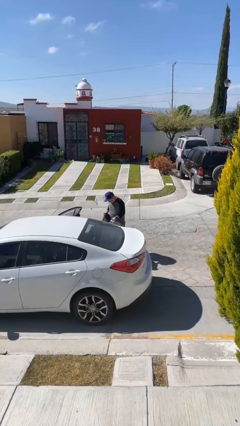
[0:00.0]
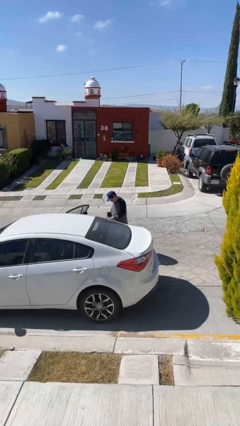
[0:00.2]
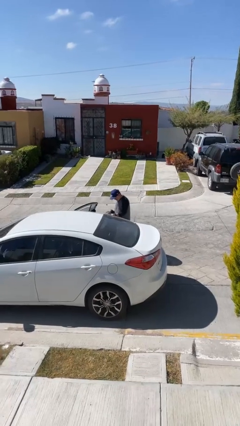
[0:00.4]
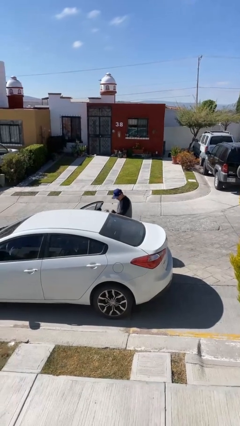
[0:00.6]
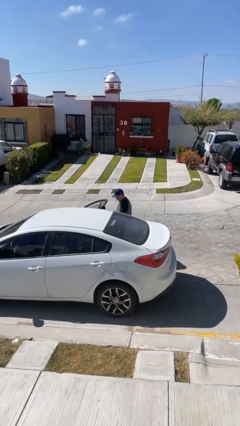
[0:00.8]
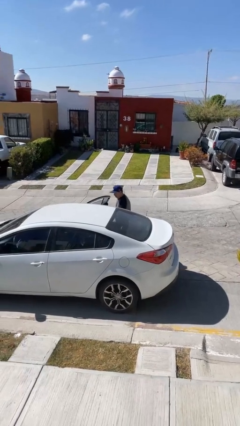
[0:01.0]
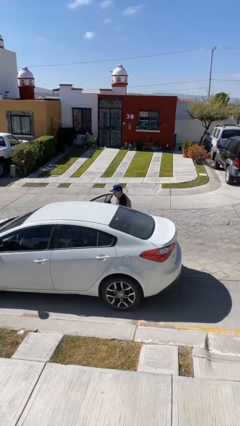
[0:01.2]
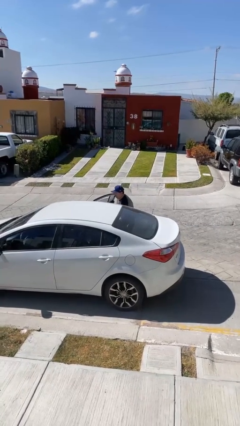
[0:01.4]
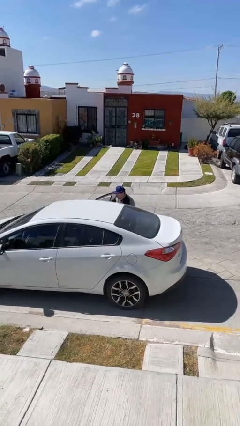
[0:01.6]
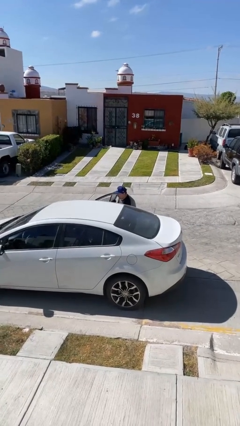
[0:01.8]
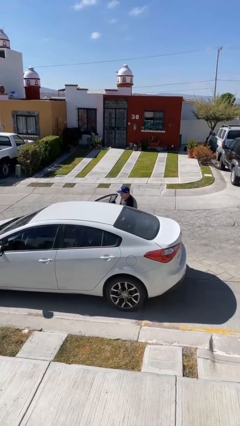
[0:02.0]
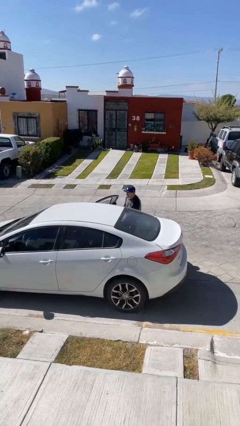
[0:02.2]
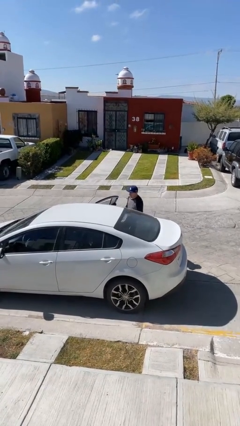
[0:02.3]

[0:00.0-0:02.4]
person loads car

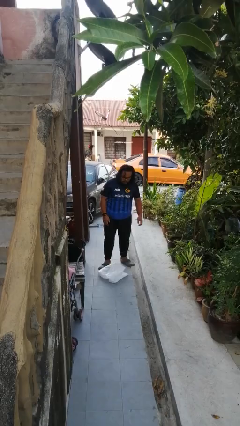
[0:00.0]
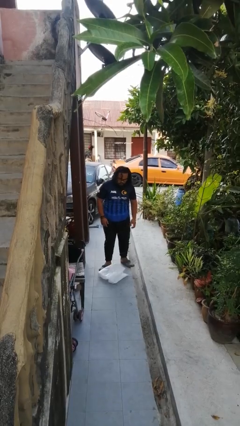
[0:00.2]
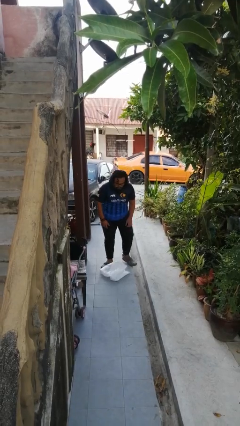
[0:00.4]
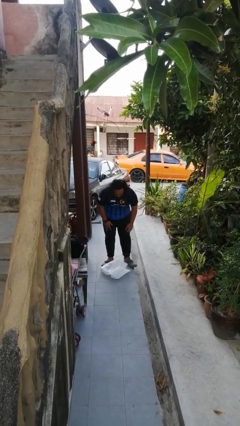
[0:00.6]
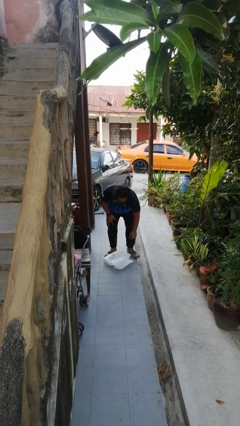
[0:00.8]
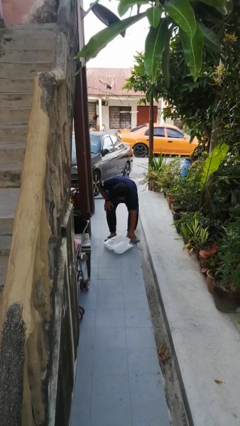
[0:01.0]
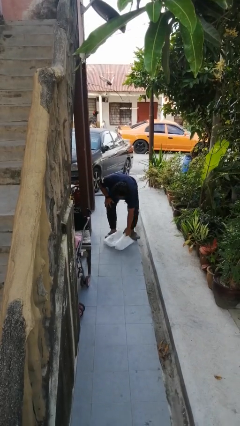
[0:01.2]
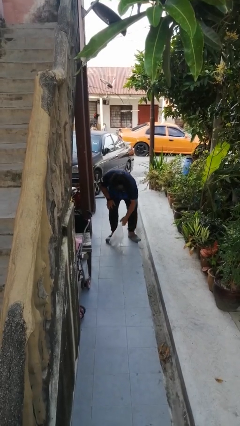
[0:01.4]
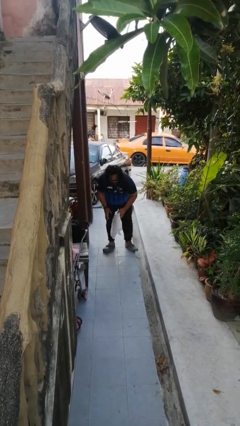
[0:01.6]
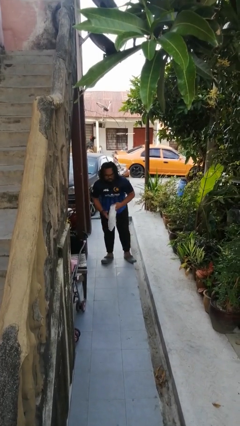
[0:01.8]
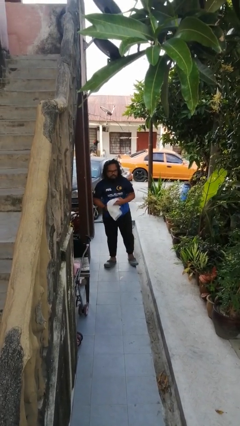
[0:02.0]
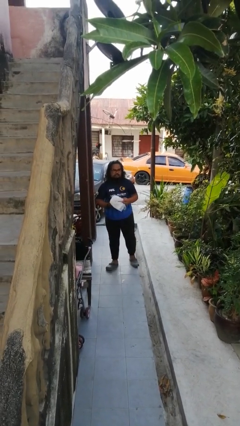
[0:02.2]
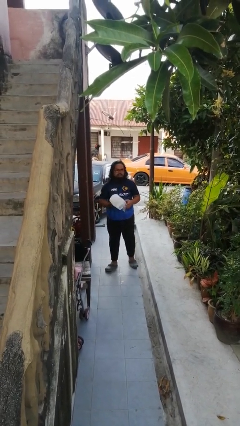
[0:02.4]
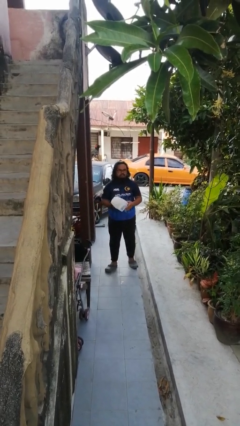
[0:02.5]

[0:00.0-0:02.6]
person picks up object from floor

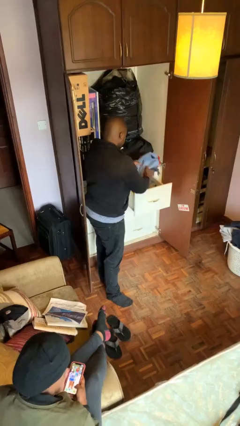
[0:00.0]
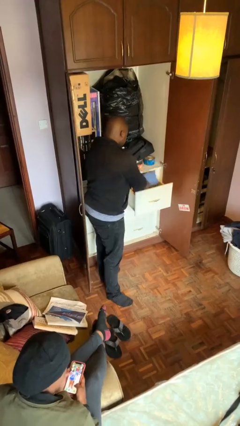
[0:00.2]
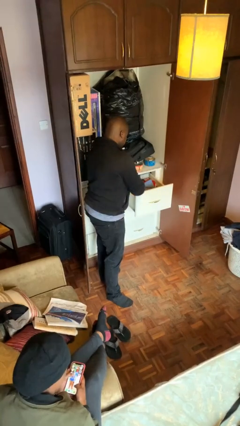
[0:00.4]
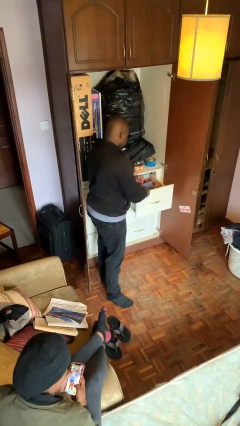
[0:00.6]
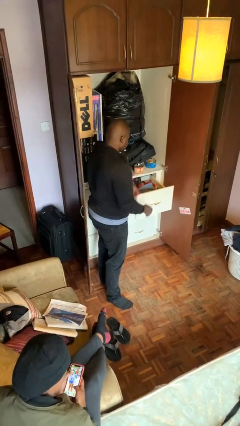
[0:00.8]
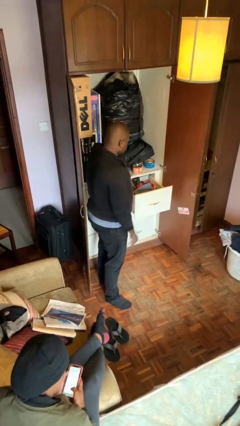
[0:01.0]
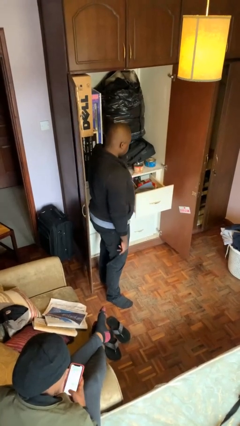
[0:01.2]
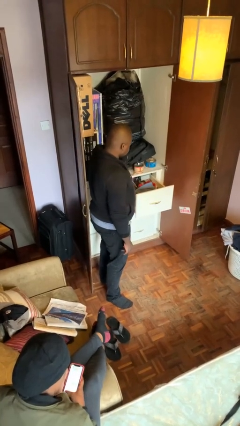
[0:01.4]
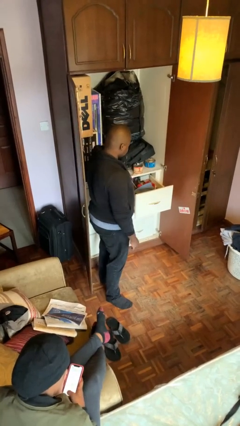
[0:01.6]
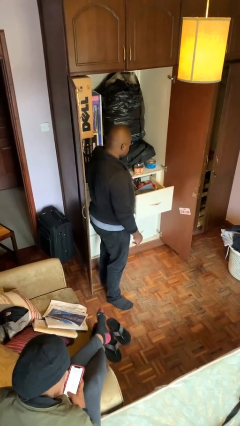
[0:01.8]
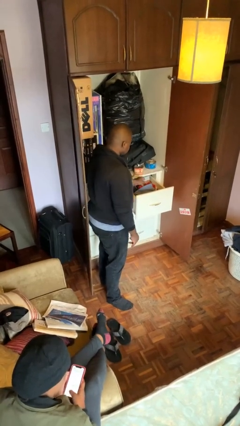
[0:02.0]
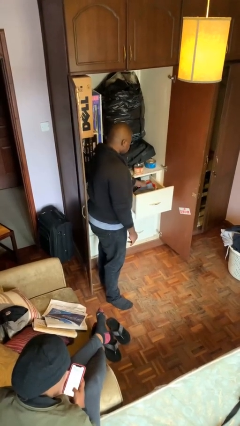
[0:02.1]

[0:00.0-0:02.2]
person puts clothes into dresser

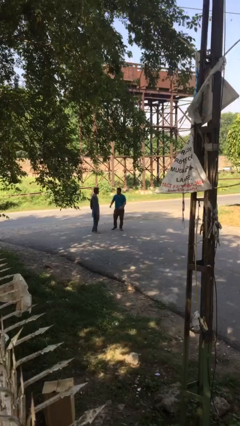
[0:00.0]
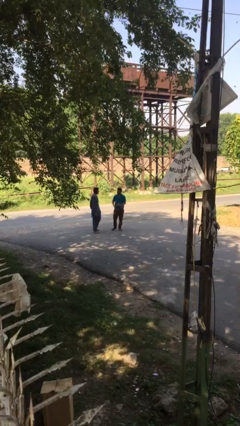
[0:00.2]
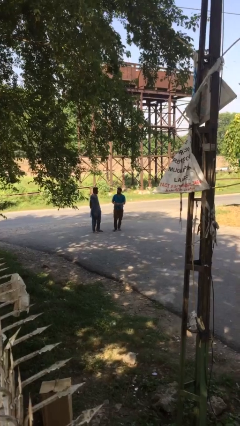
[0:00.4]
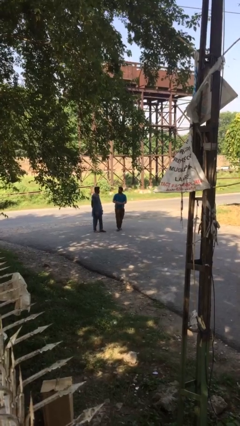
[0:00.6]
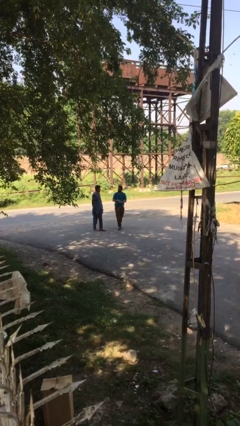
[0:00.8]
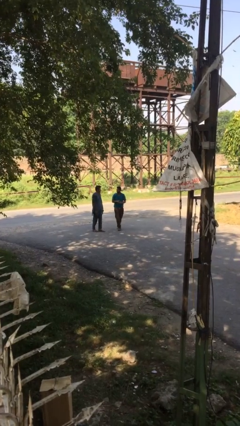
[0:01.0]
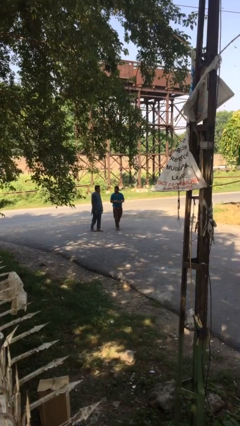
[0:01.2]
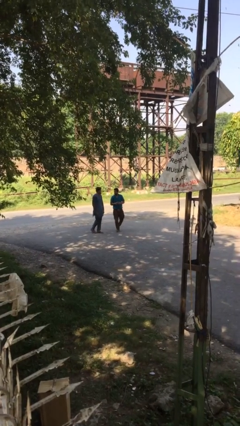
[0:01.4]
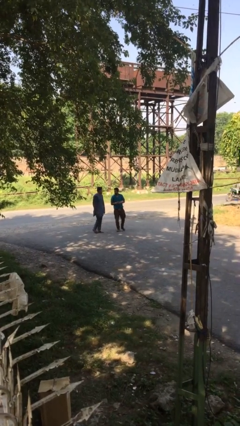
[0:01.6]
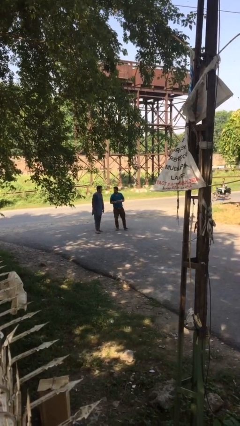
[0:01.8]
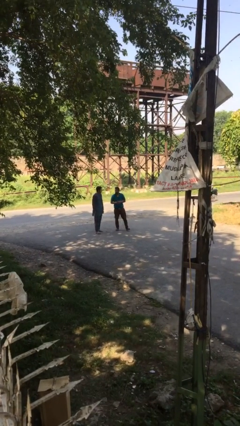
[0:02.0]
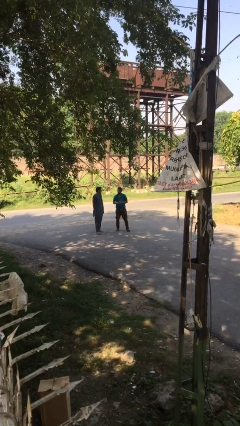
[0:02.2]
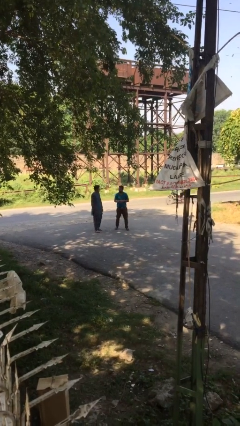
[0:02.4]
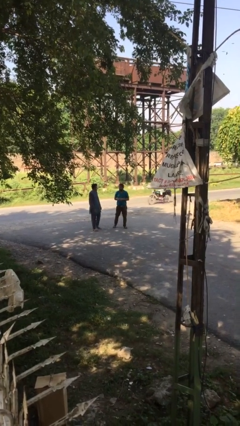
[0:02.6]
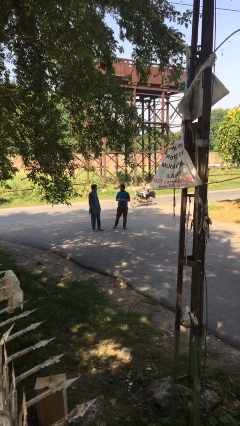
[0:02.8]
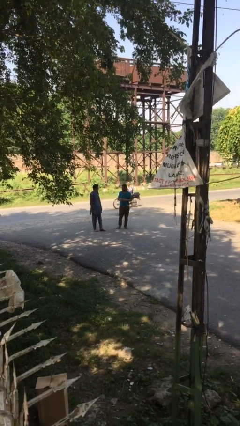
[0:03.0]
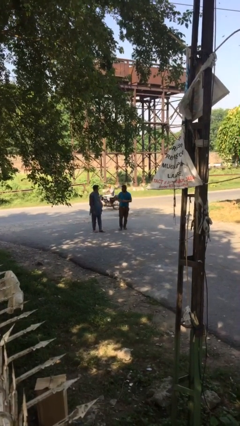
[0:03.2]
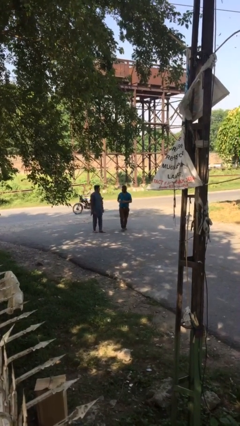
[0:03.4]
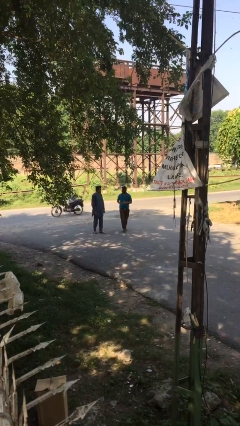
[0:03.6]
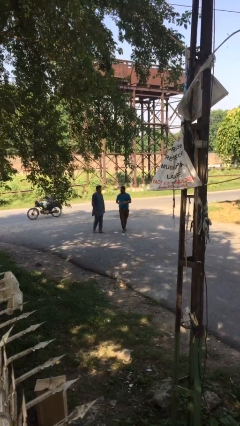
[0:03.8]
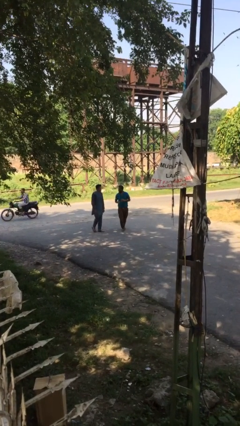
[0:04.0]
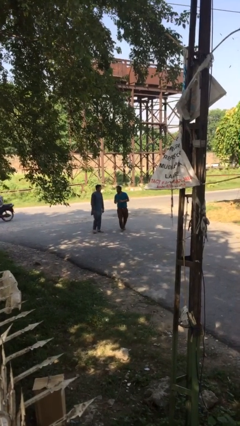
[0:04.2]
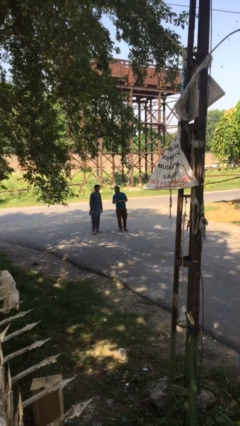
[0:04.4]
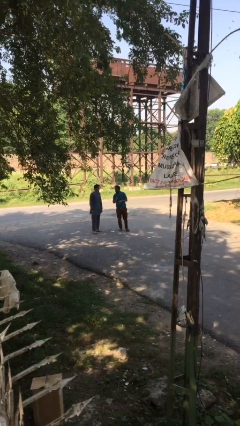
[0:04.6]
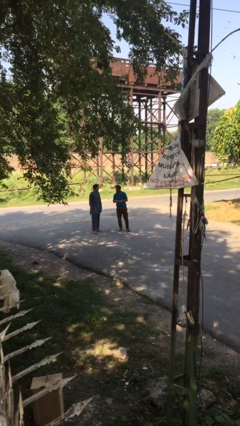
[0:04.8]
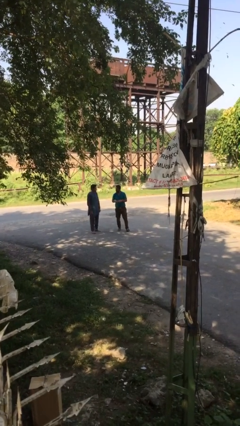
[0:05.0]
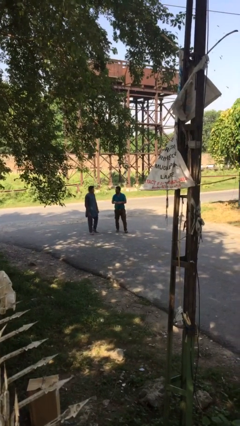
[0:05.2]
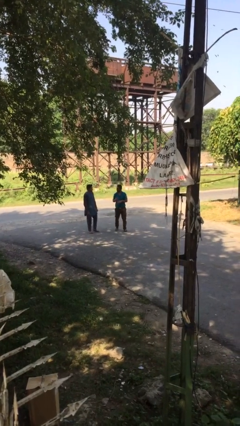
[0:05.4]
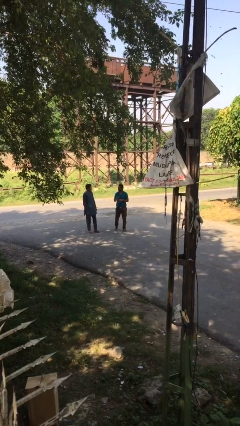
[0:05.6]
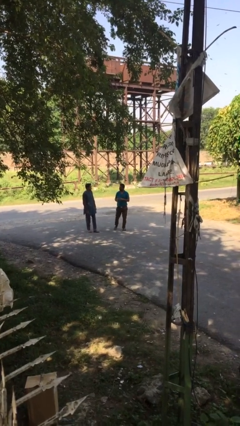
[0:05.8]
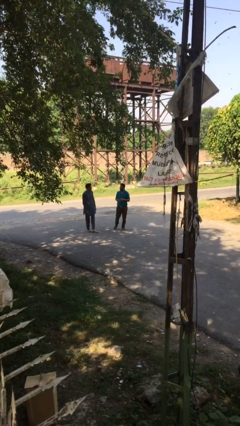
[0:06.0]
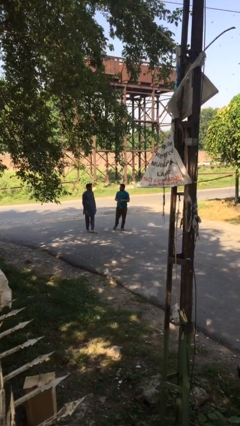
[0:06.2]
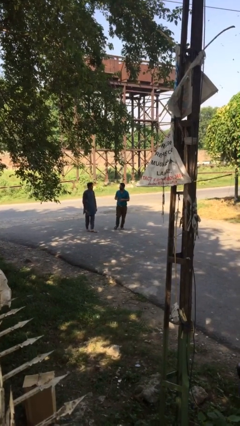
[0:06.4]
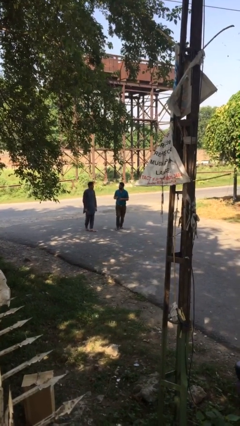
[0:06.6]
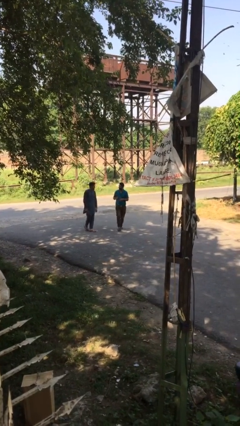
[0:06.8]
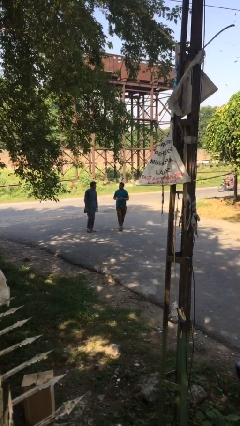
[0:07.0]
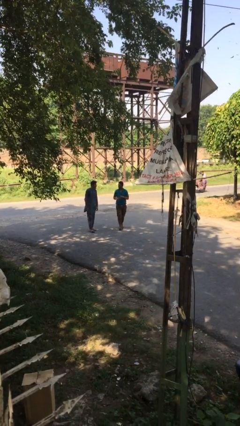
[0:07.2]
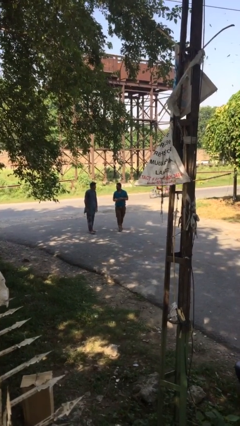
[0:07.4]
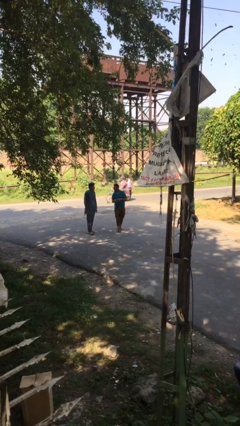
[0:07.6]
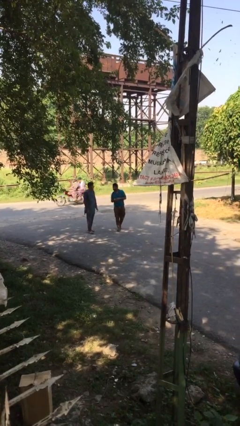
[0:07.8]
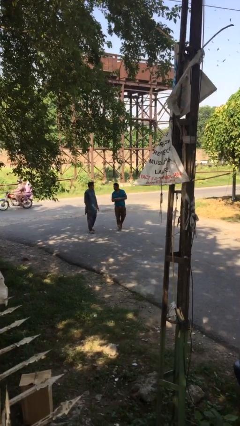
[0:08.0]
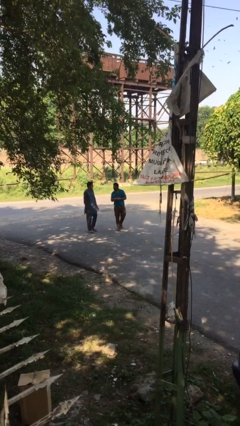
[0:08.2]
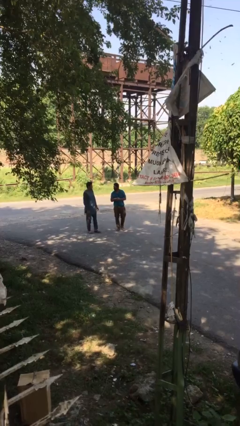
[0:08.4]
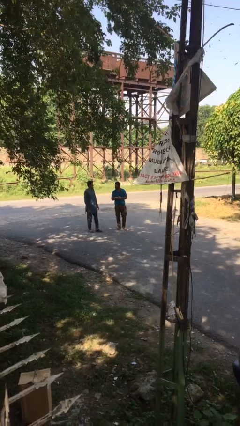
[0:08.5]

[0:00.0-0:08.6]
person talks to person

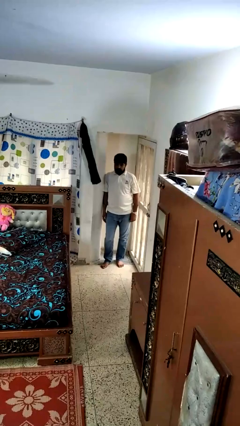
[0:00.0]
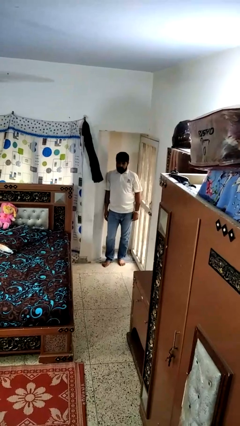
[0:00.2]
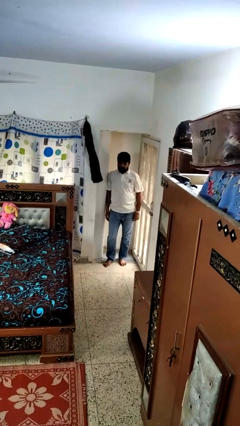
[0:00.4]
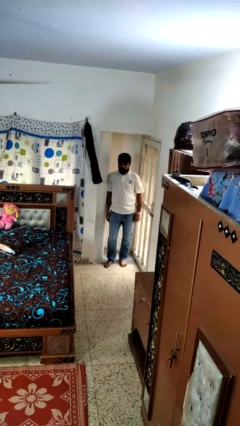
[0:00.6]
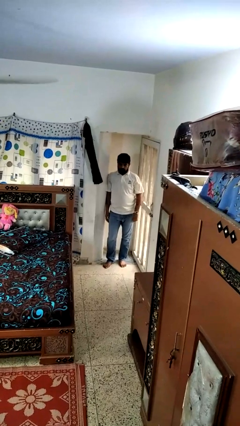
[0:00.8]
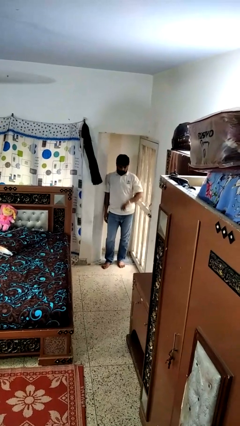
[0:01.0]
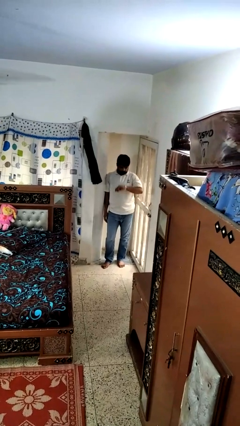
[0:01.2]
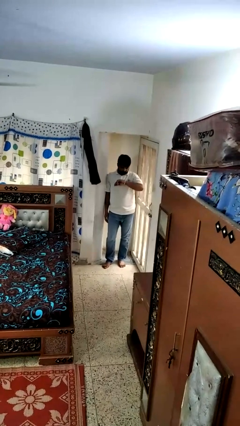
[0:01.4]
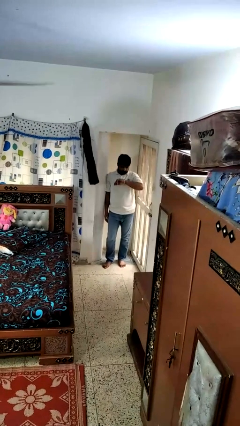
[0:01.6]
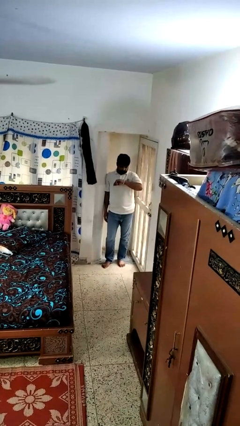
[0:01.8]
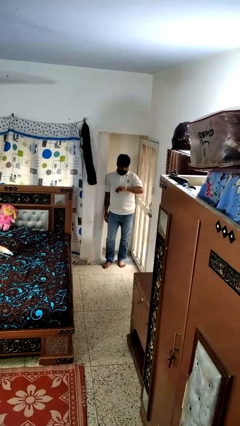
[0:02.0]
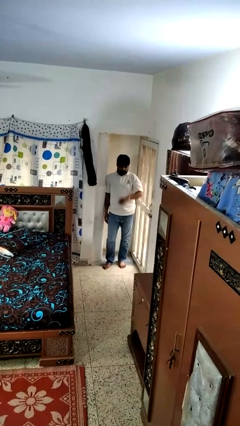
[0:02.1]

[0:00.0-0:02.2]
person looks at wristwatch
